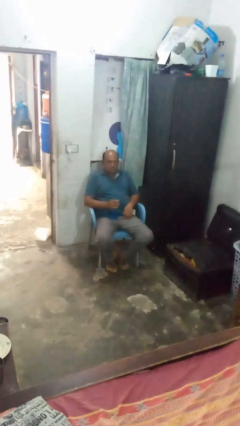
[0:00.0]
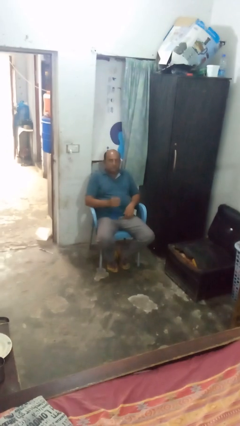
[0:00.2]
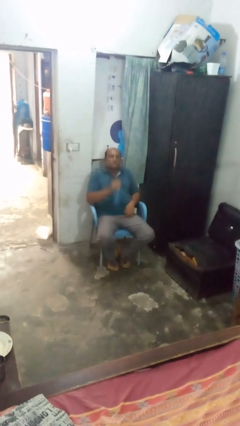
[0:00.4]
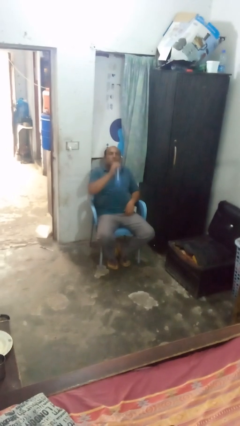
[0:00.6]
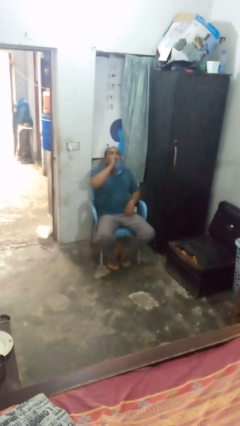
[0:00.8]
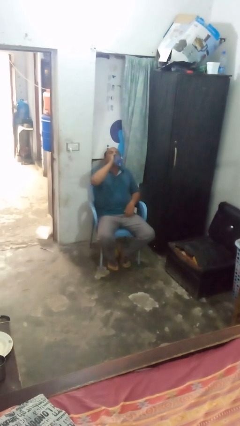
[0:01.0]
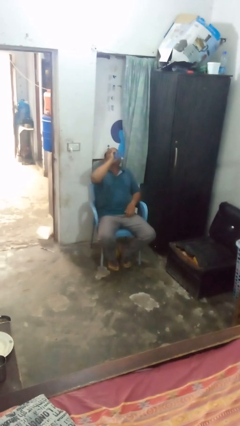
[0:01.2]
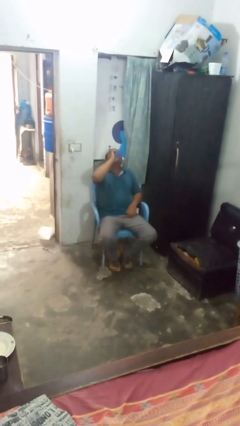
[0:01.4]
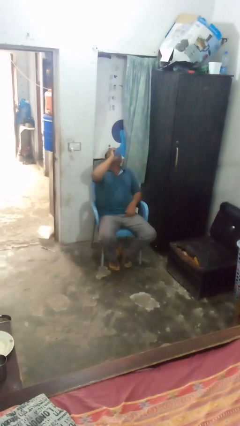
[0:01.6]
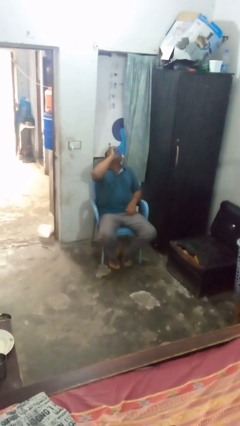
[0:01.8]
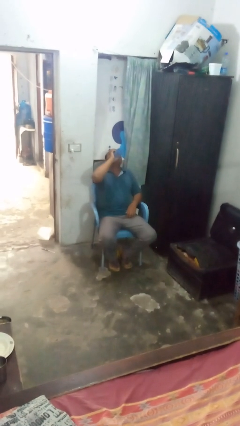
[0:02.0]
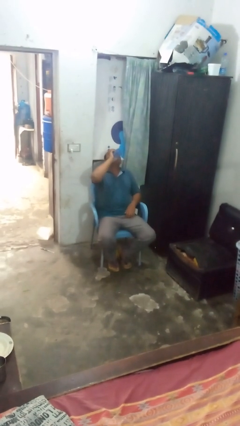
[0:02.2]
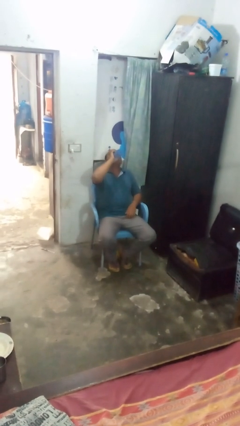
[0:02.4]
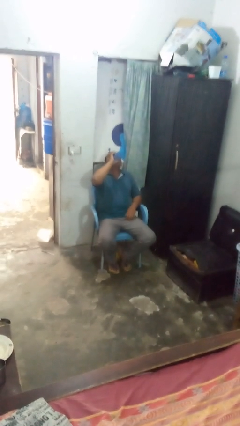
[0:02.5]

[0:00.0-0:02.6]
person drinks from bottle

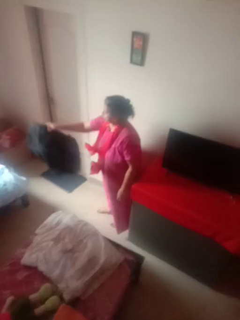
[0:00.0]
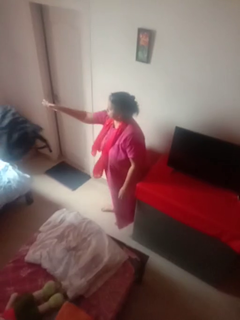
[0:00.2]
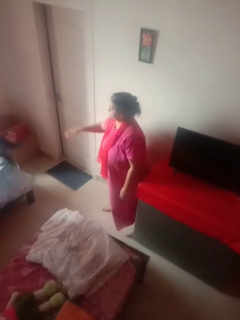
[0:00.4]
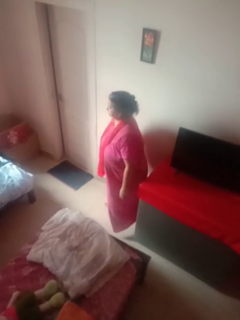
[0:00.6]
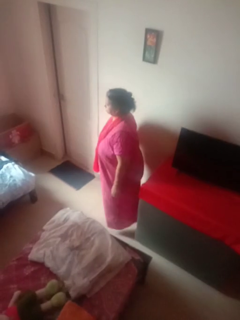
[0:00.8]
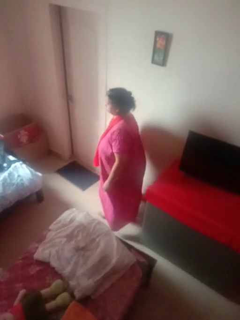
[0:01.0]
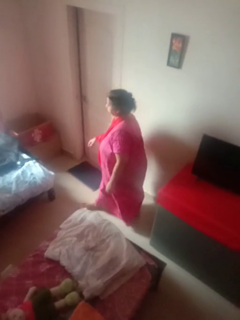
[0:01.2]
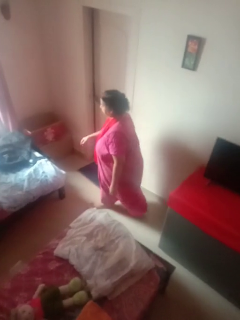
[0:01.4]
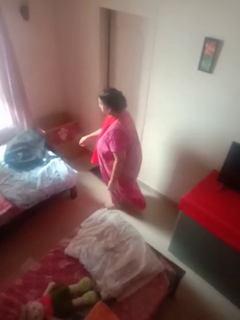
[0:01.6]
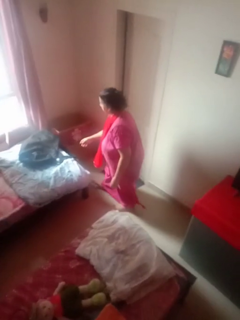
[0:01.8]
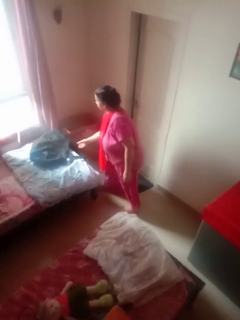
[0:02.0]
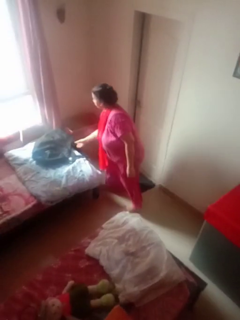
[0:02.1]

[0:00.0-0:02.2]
person throws object on bed

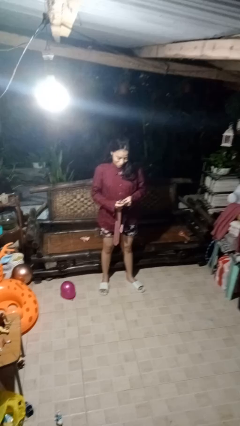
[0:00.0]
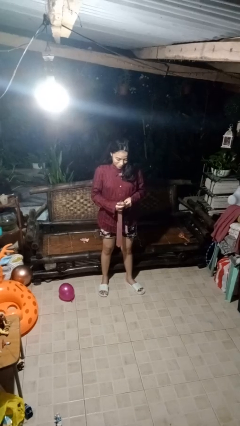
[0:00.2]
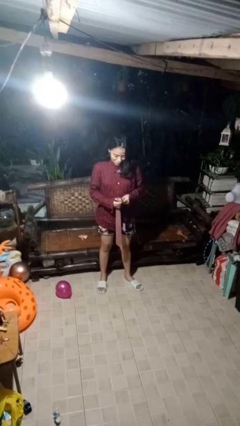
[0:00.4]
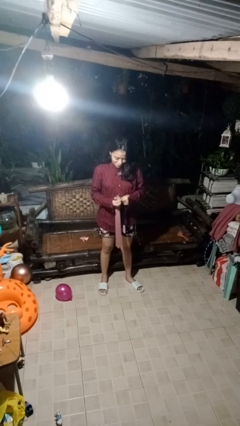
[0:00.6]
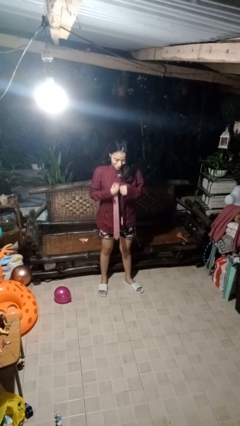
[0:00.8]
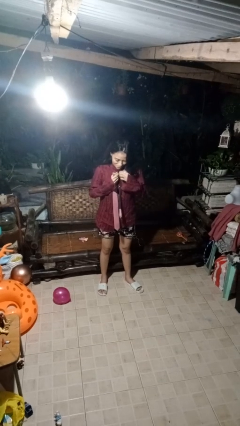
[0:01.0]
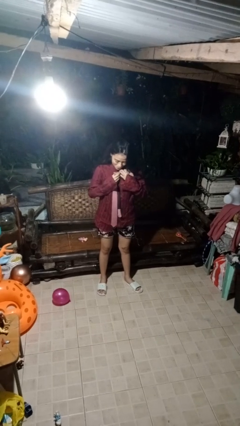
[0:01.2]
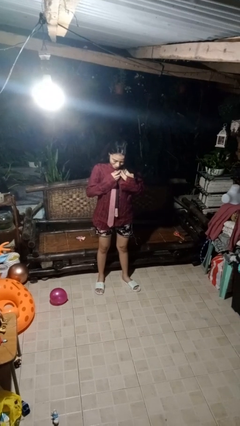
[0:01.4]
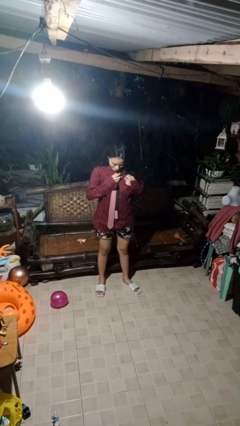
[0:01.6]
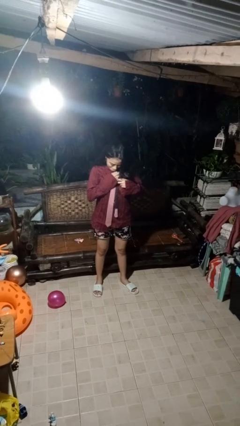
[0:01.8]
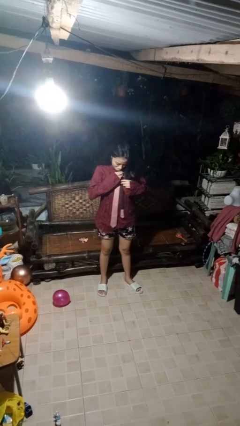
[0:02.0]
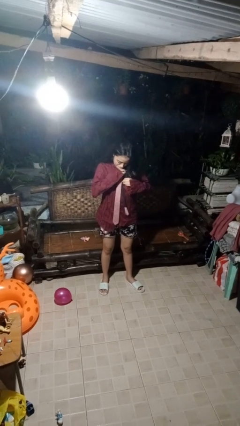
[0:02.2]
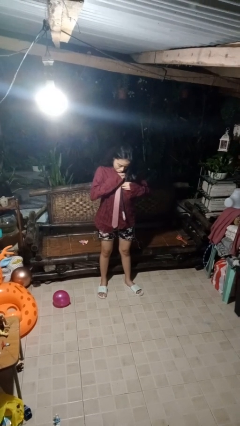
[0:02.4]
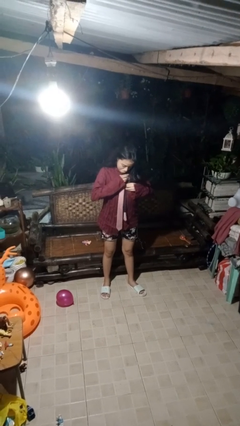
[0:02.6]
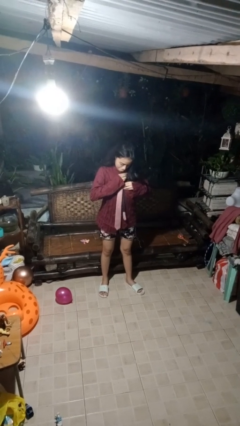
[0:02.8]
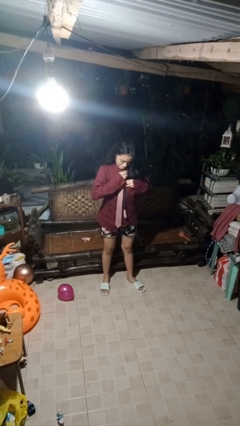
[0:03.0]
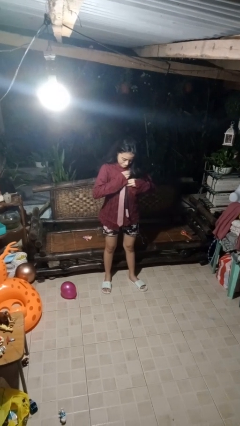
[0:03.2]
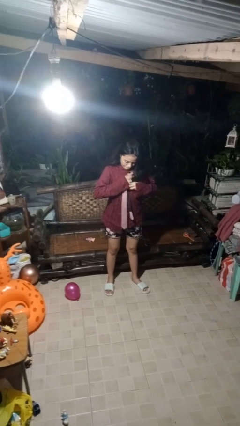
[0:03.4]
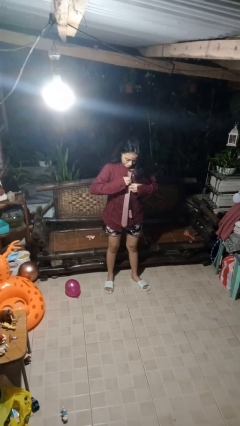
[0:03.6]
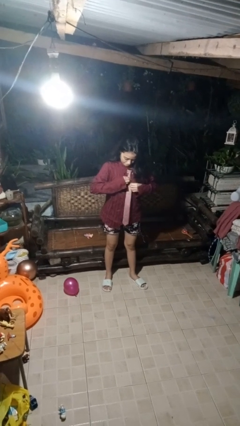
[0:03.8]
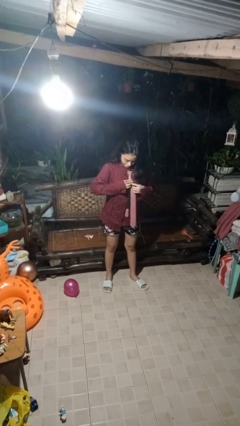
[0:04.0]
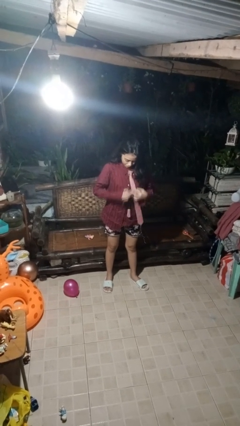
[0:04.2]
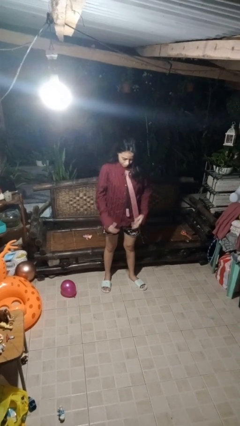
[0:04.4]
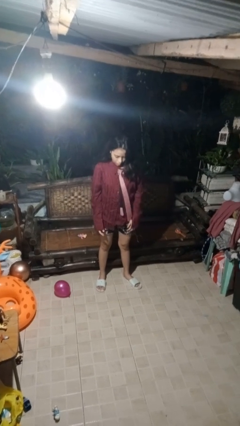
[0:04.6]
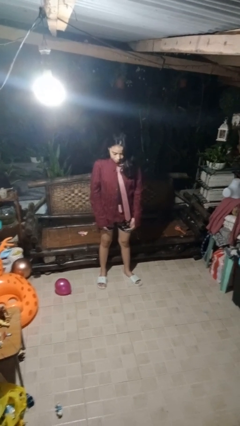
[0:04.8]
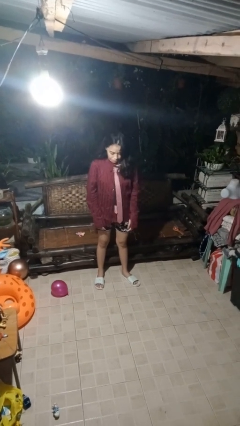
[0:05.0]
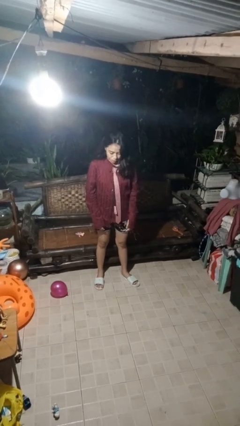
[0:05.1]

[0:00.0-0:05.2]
person puts on necktie

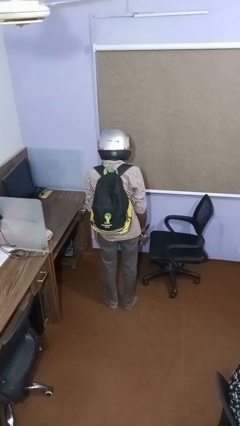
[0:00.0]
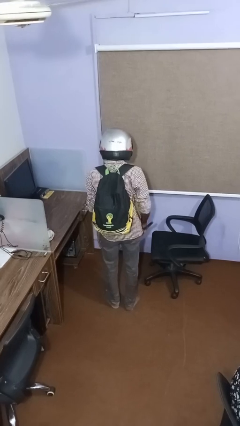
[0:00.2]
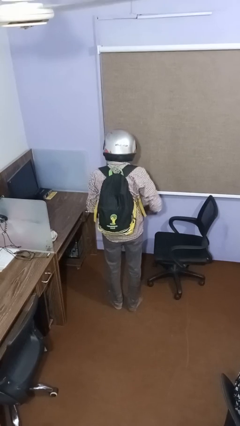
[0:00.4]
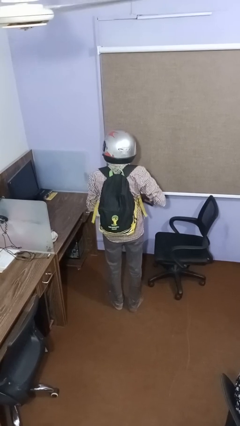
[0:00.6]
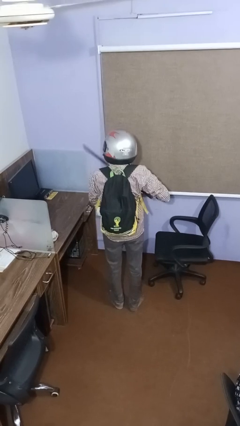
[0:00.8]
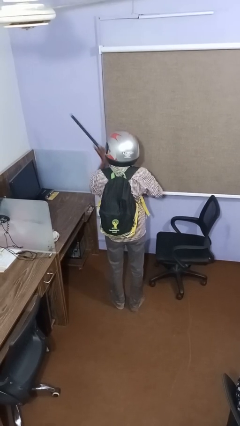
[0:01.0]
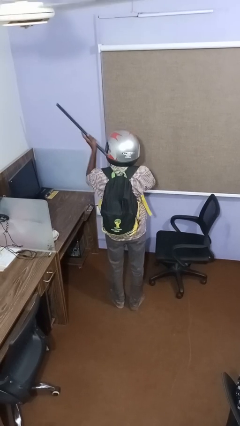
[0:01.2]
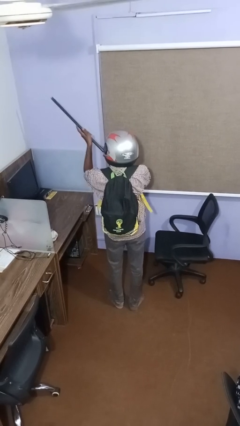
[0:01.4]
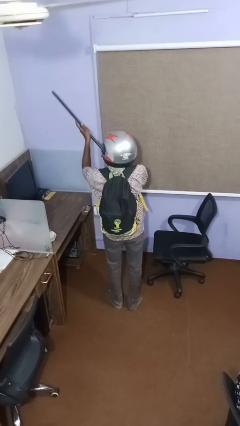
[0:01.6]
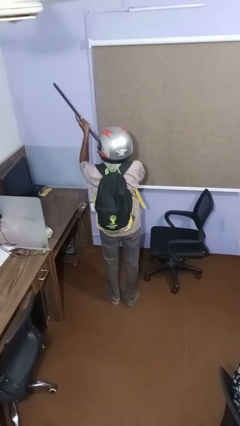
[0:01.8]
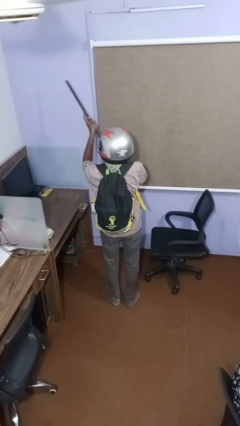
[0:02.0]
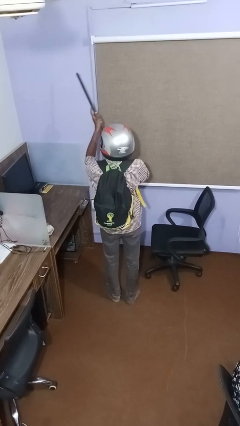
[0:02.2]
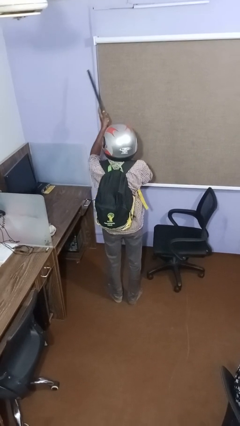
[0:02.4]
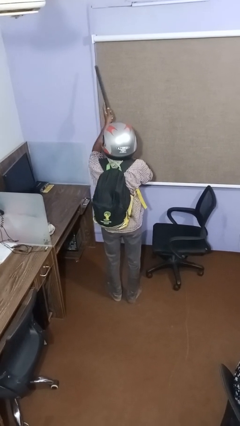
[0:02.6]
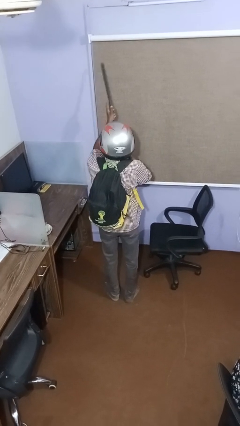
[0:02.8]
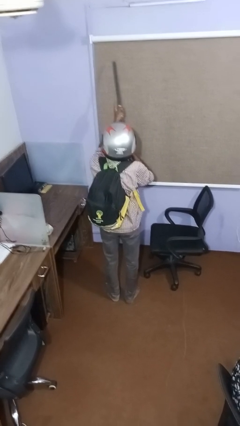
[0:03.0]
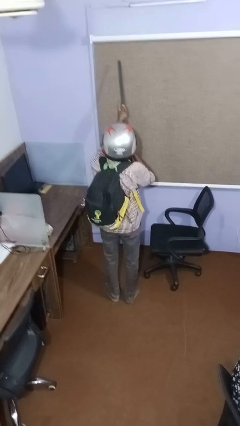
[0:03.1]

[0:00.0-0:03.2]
person swats bug

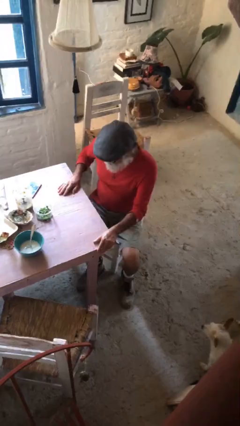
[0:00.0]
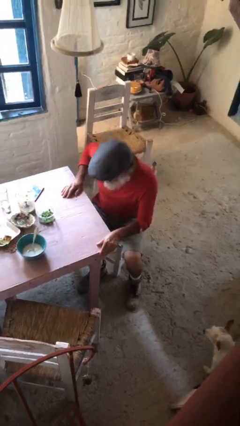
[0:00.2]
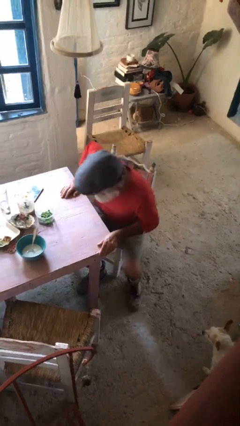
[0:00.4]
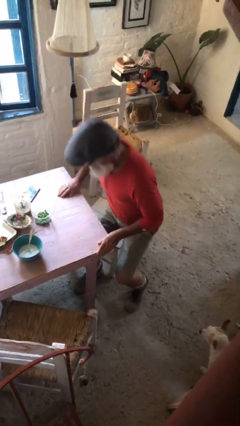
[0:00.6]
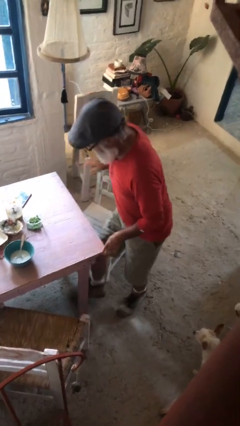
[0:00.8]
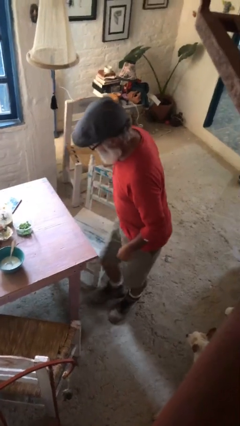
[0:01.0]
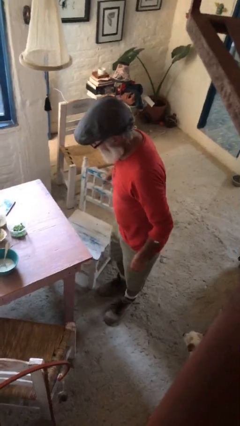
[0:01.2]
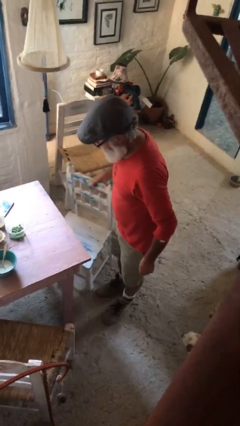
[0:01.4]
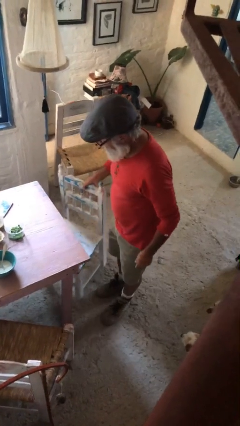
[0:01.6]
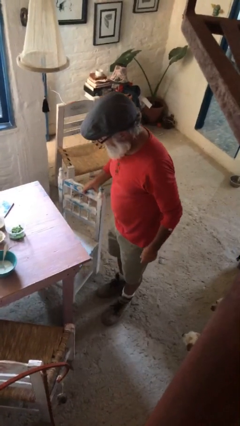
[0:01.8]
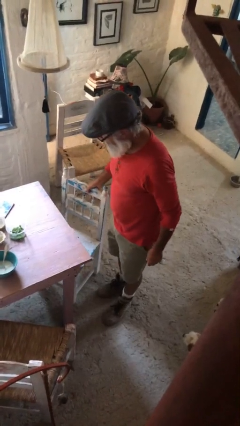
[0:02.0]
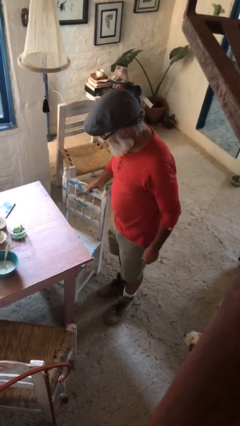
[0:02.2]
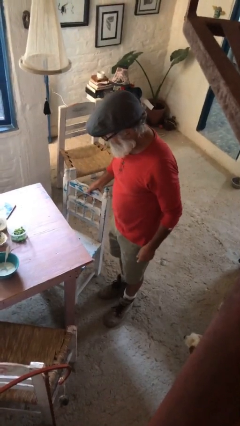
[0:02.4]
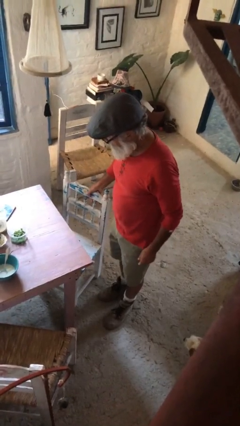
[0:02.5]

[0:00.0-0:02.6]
person stands up

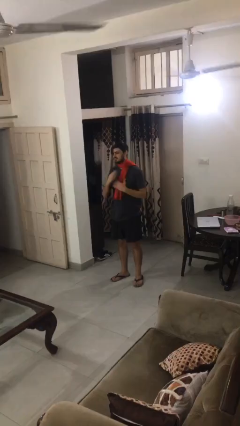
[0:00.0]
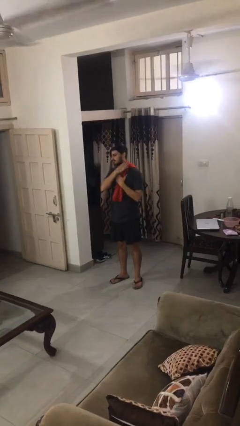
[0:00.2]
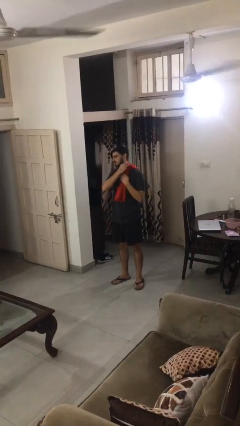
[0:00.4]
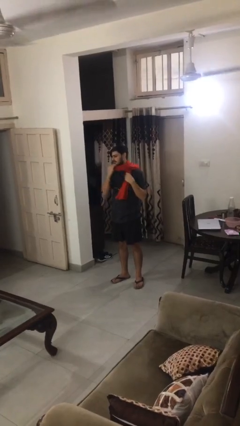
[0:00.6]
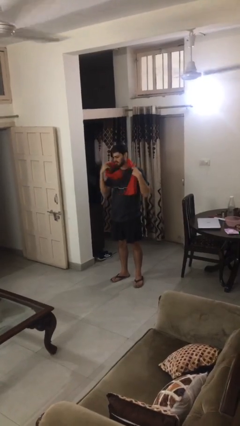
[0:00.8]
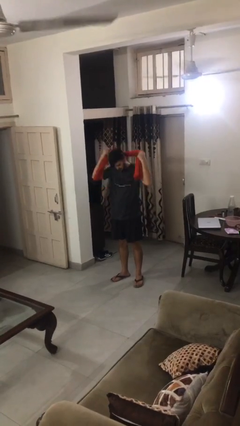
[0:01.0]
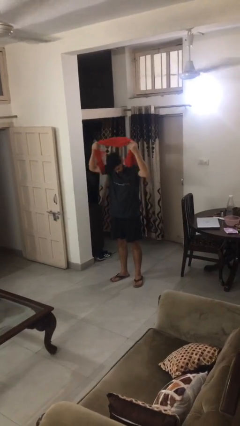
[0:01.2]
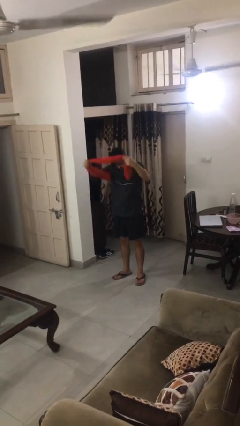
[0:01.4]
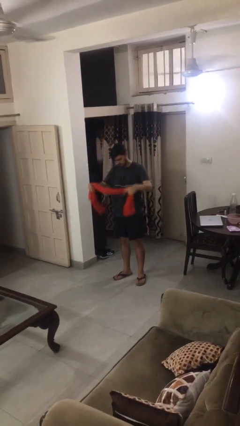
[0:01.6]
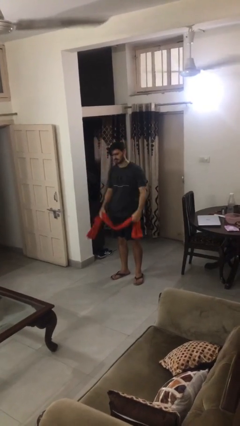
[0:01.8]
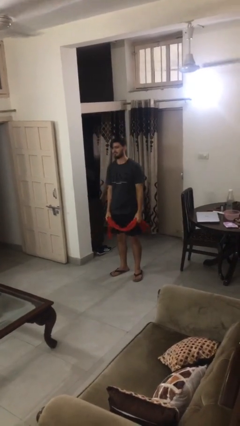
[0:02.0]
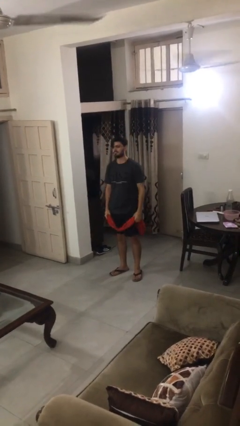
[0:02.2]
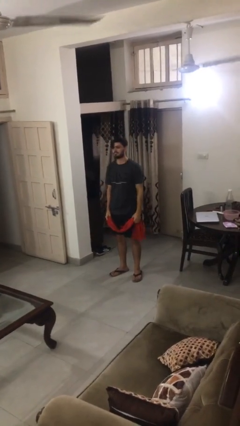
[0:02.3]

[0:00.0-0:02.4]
person takes off scarf
